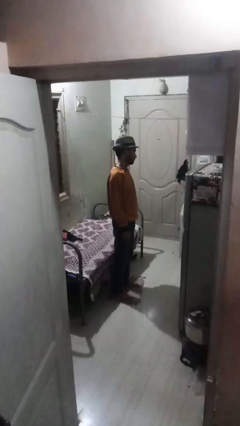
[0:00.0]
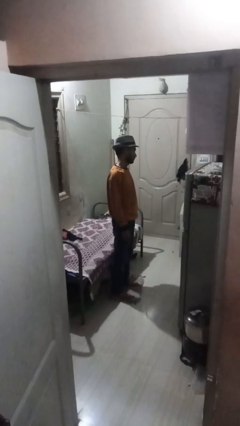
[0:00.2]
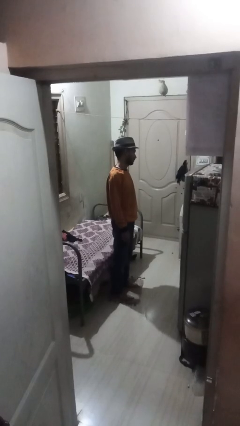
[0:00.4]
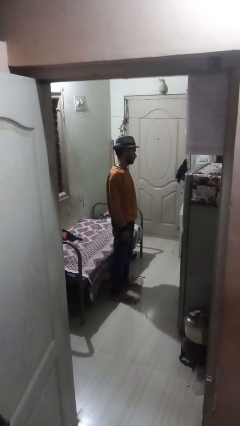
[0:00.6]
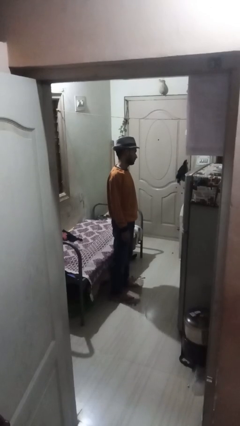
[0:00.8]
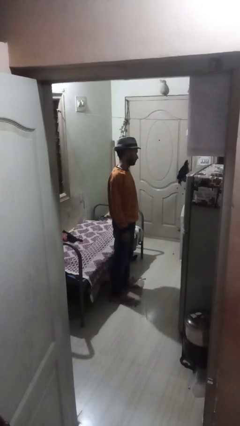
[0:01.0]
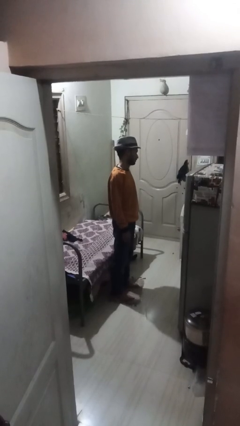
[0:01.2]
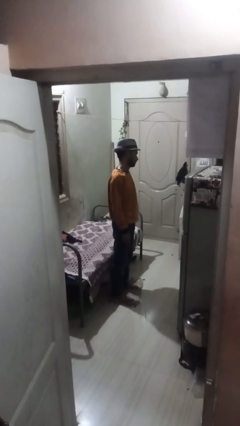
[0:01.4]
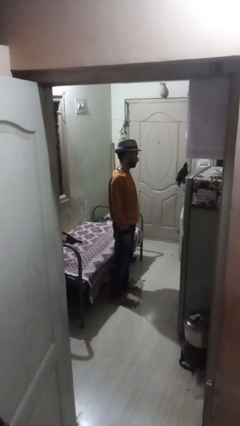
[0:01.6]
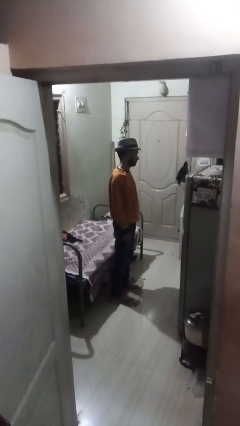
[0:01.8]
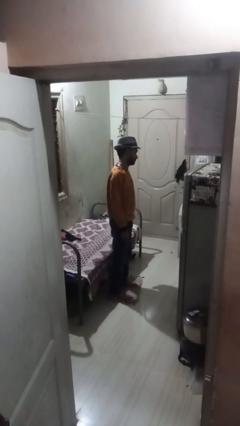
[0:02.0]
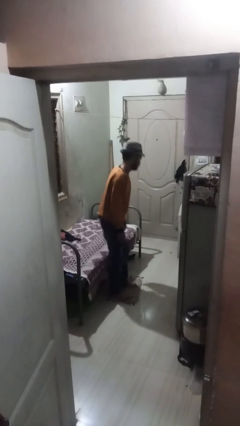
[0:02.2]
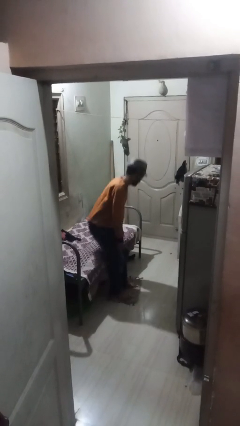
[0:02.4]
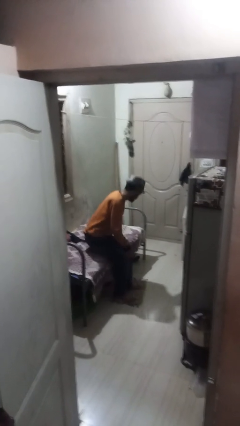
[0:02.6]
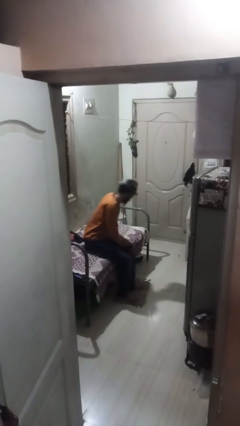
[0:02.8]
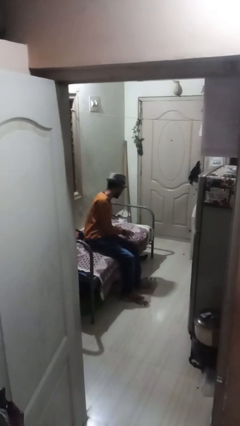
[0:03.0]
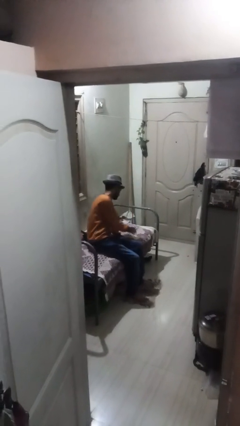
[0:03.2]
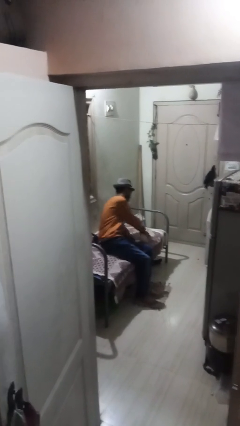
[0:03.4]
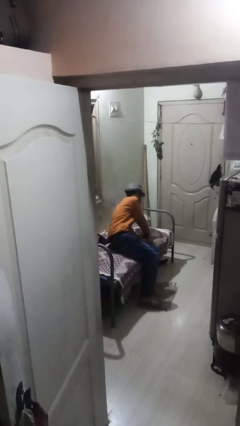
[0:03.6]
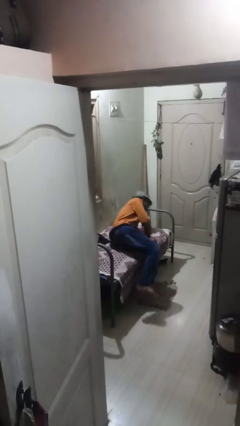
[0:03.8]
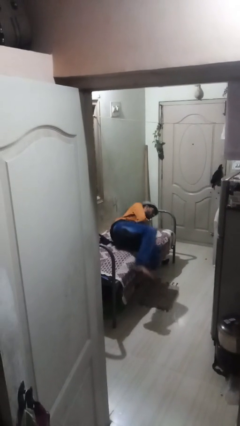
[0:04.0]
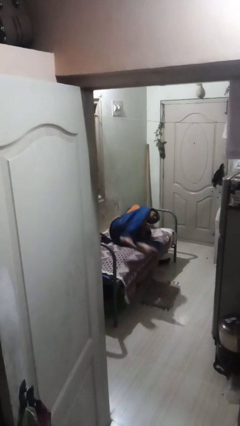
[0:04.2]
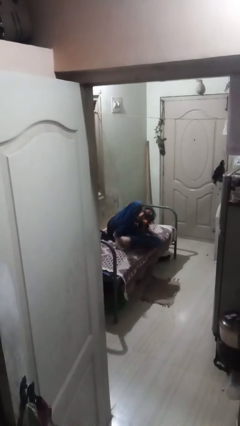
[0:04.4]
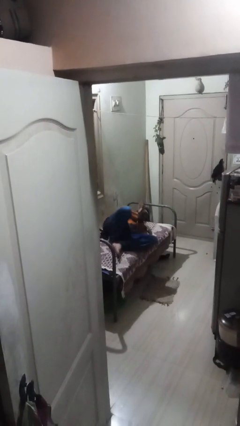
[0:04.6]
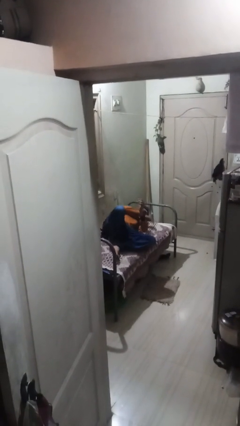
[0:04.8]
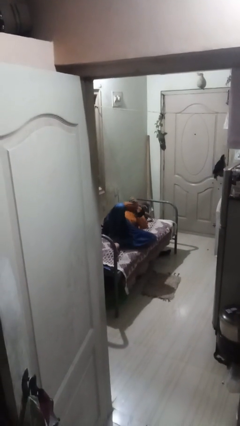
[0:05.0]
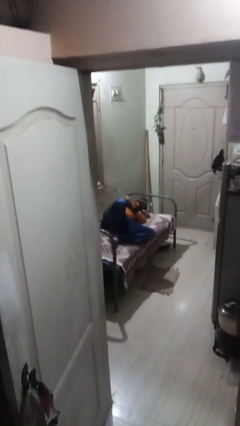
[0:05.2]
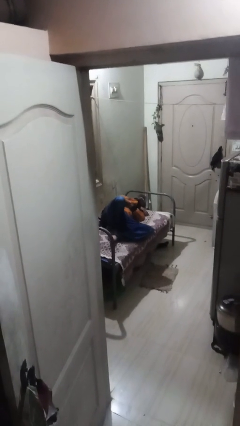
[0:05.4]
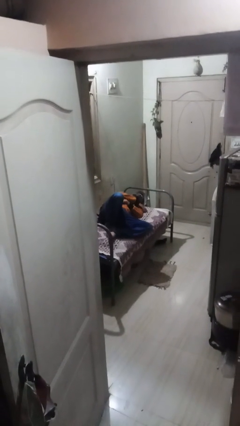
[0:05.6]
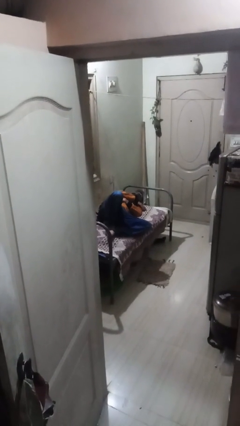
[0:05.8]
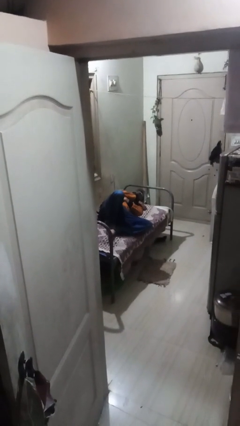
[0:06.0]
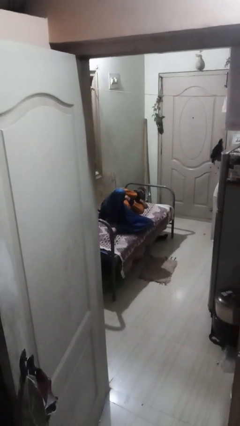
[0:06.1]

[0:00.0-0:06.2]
person lies down on bed

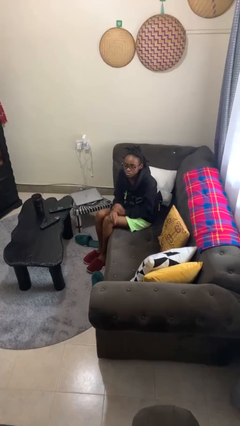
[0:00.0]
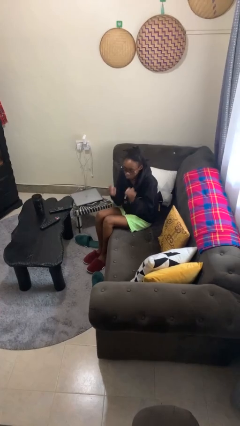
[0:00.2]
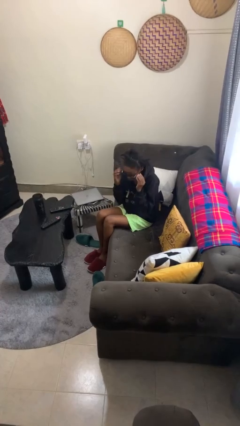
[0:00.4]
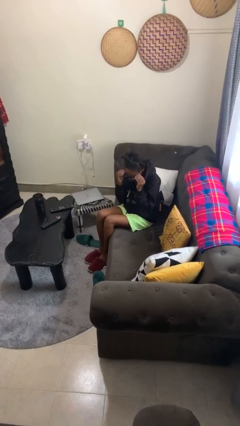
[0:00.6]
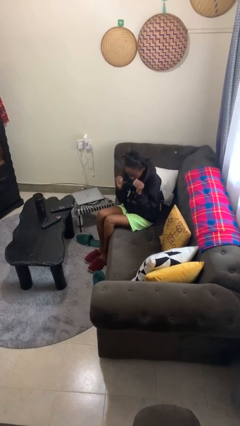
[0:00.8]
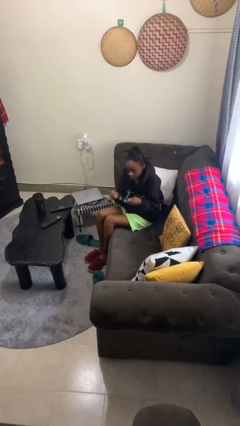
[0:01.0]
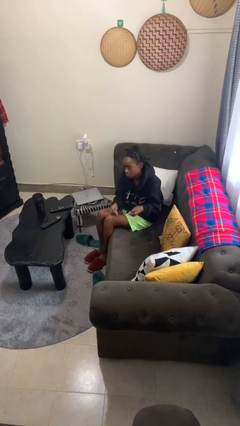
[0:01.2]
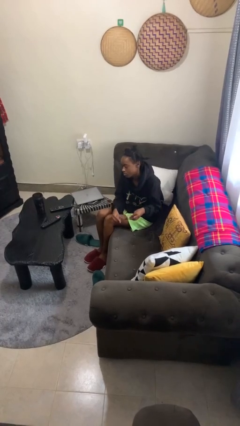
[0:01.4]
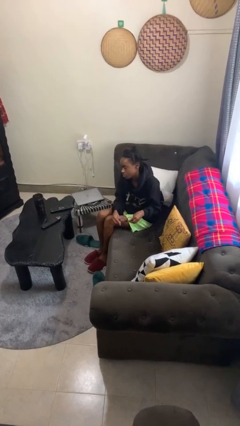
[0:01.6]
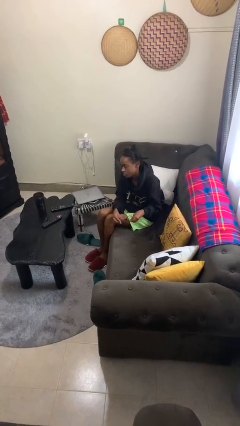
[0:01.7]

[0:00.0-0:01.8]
person takes off glasses

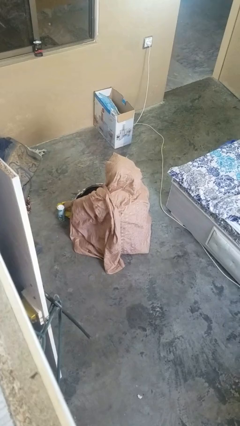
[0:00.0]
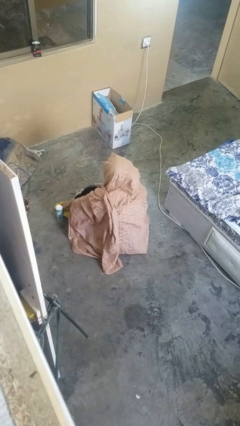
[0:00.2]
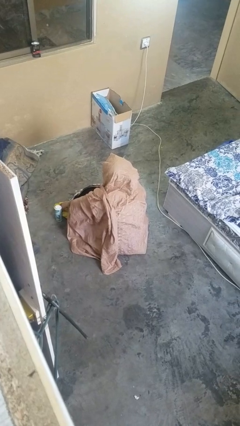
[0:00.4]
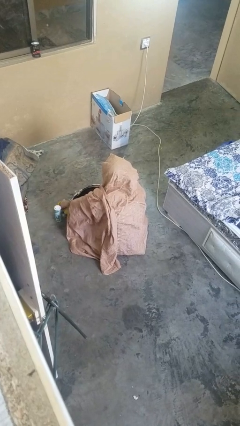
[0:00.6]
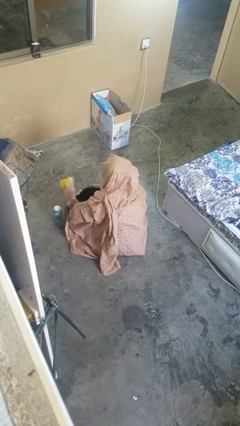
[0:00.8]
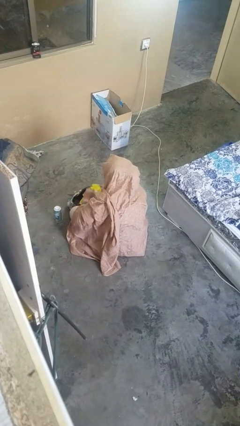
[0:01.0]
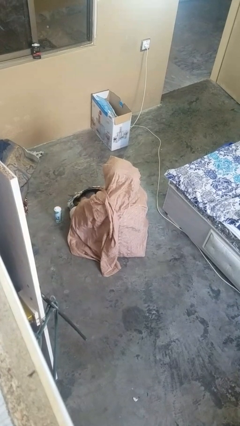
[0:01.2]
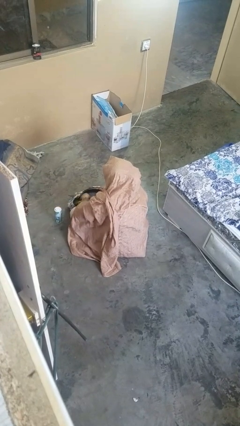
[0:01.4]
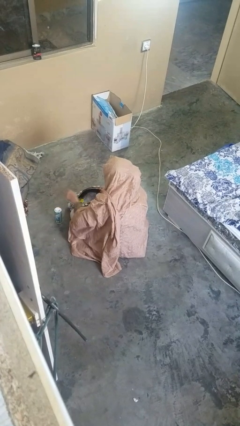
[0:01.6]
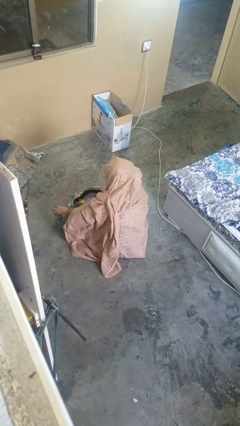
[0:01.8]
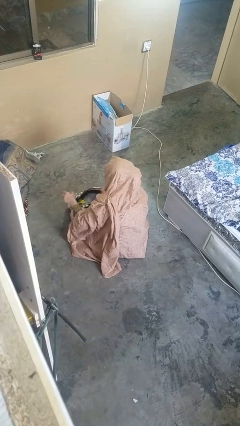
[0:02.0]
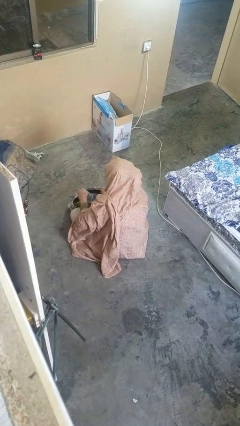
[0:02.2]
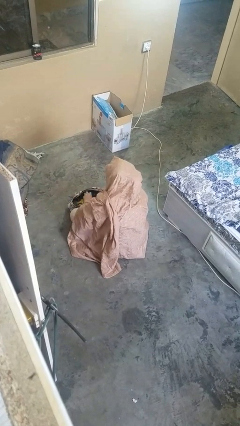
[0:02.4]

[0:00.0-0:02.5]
person puts object into purse

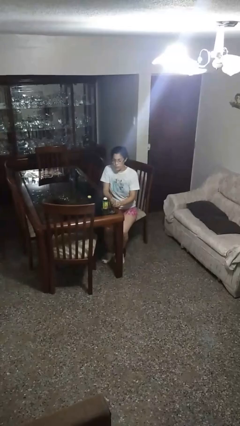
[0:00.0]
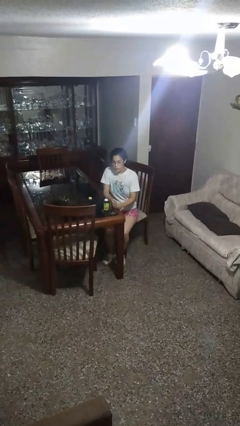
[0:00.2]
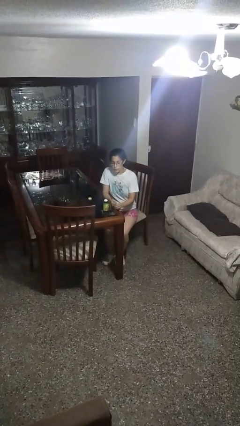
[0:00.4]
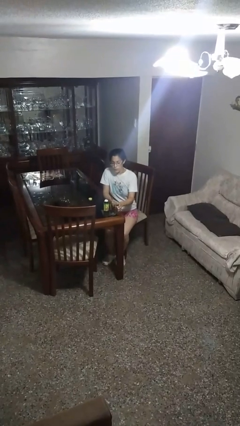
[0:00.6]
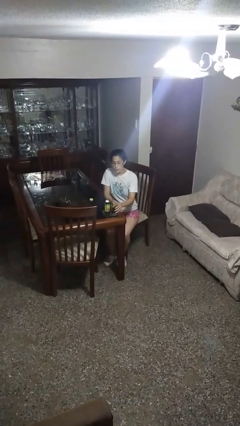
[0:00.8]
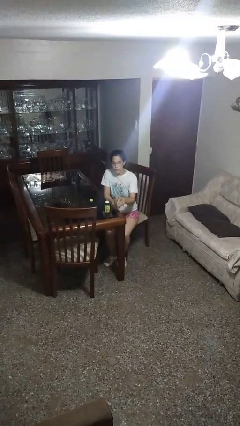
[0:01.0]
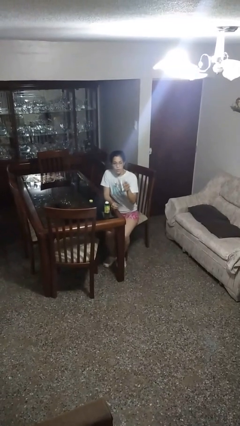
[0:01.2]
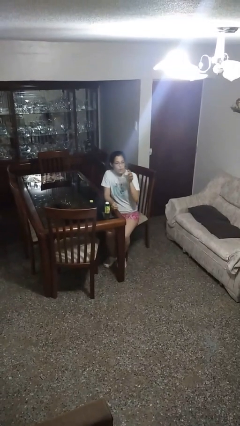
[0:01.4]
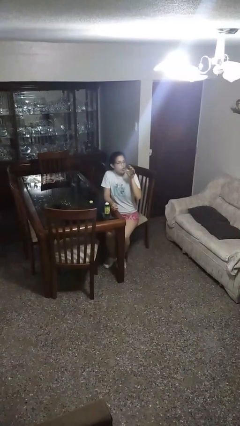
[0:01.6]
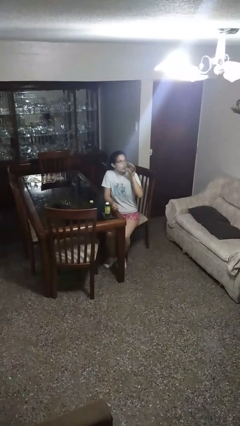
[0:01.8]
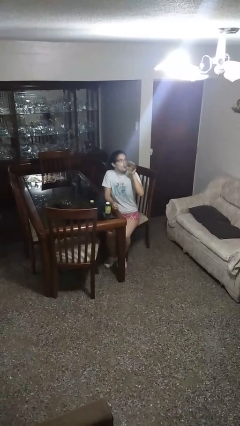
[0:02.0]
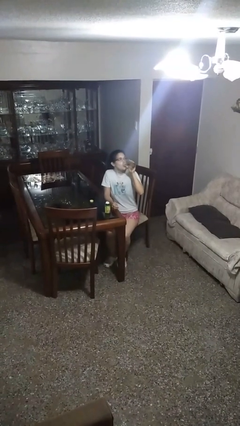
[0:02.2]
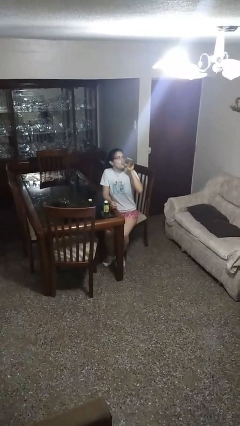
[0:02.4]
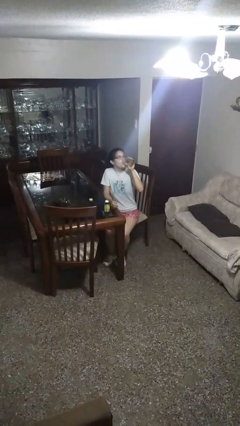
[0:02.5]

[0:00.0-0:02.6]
person drinks from cup

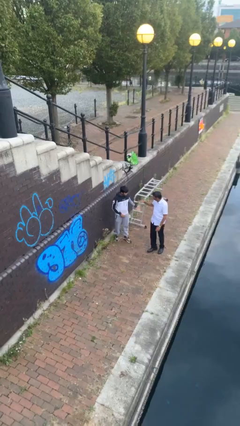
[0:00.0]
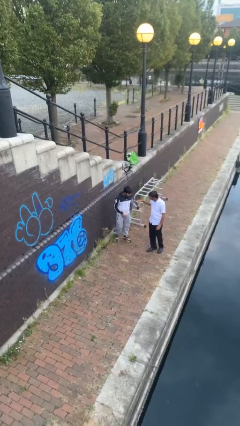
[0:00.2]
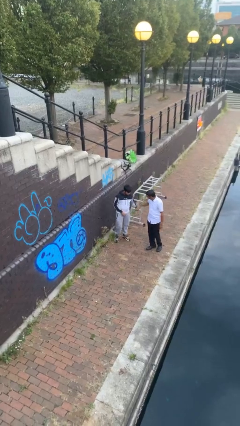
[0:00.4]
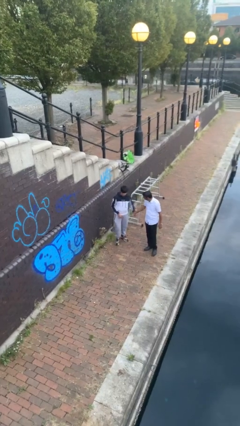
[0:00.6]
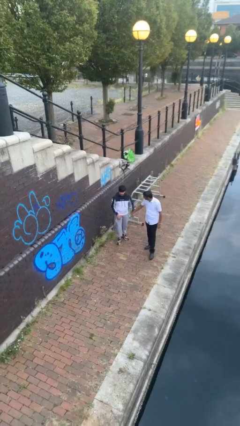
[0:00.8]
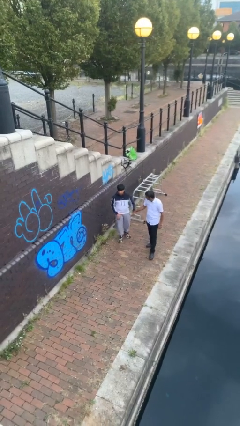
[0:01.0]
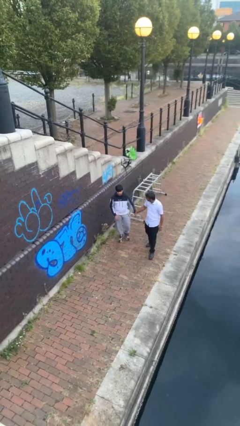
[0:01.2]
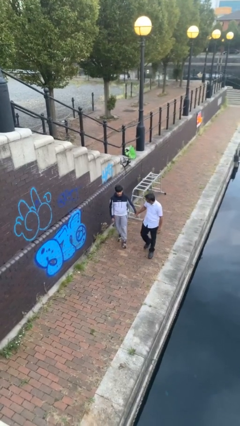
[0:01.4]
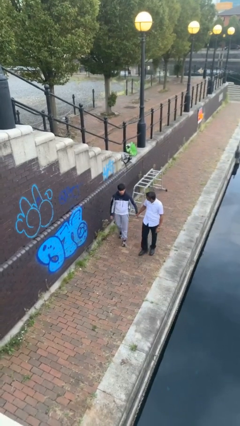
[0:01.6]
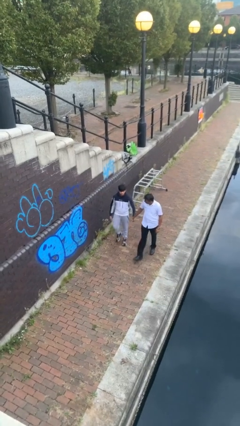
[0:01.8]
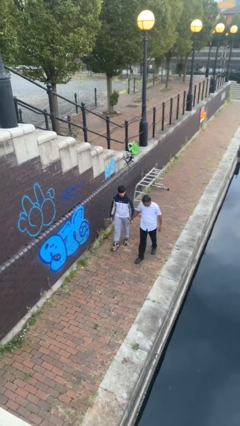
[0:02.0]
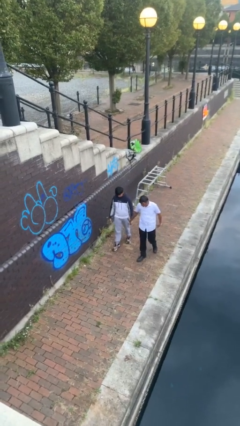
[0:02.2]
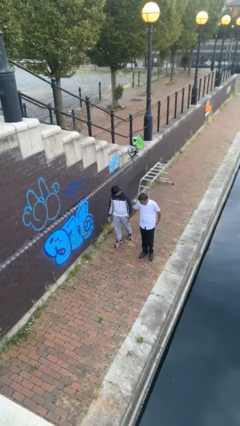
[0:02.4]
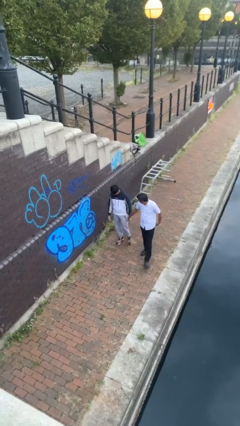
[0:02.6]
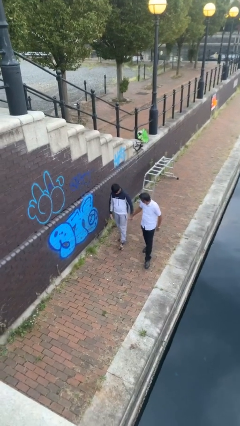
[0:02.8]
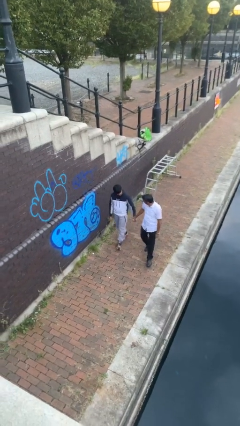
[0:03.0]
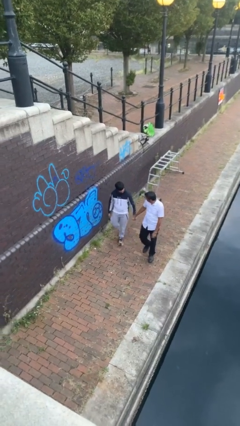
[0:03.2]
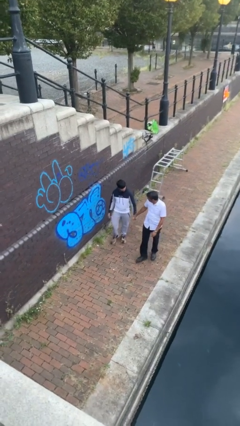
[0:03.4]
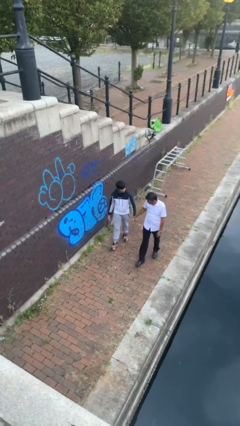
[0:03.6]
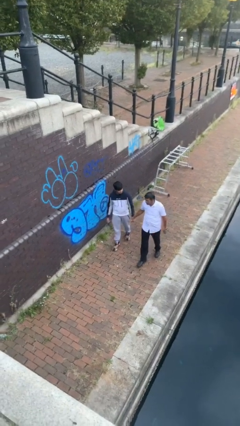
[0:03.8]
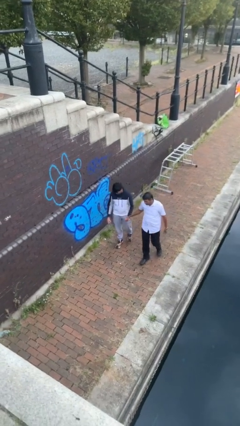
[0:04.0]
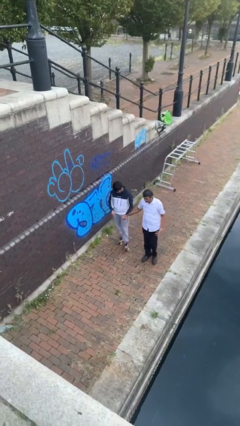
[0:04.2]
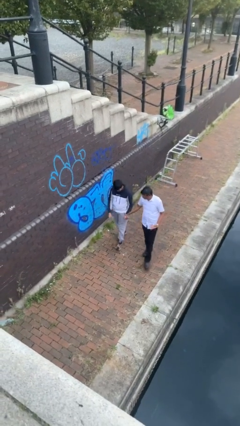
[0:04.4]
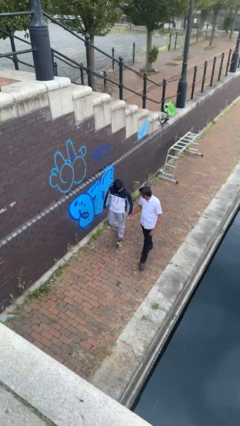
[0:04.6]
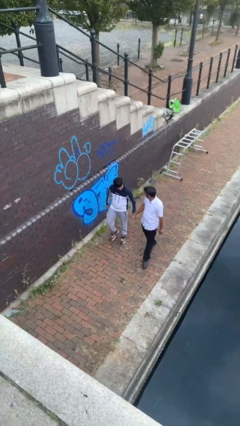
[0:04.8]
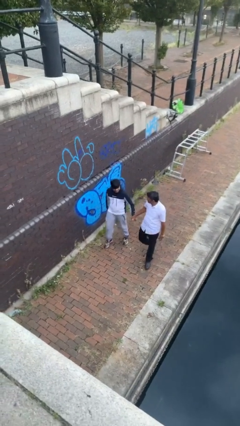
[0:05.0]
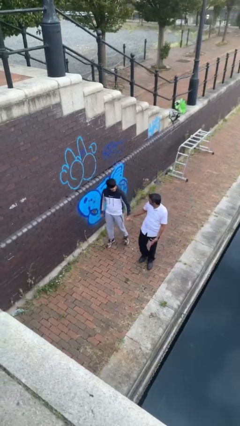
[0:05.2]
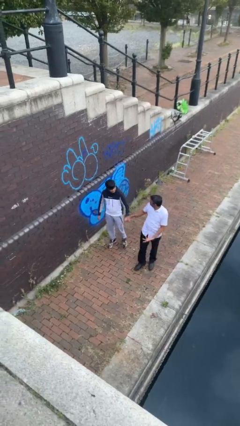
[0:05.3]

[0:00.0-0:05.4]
person holds hand
